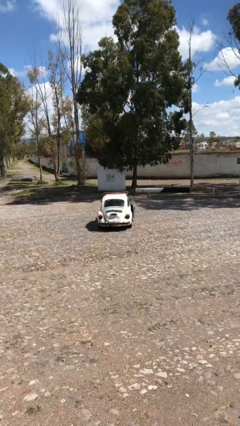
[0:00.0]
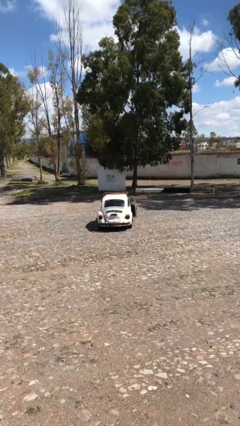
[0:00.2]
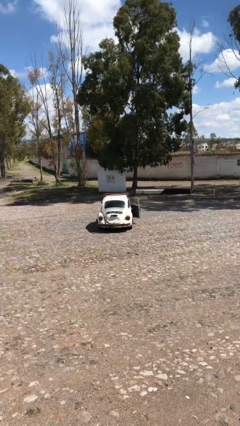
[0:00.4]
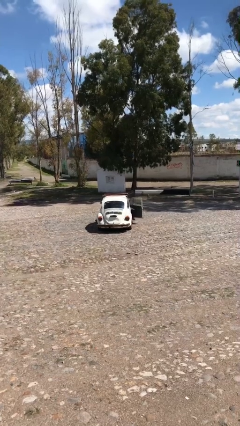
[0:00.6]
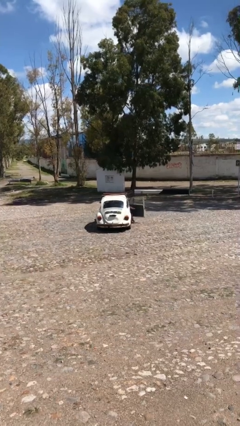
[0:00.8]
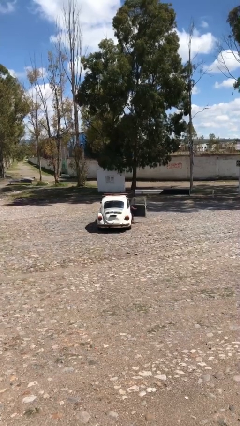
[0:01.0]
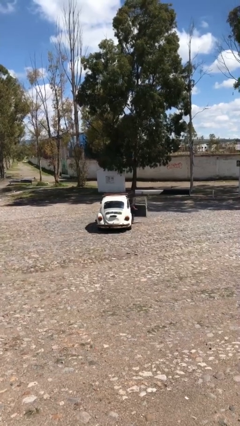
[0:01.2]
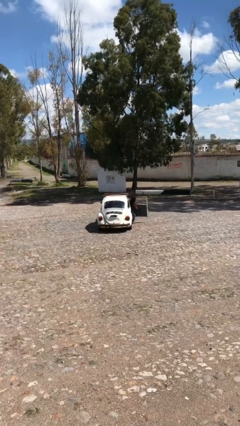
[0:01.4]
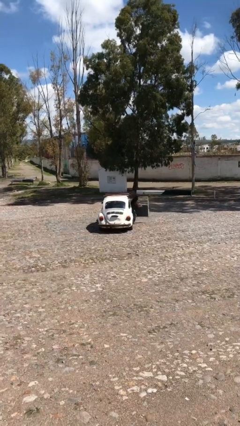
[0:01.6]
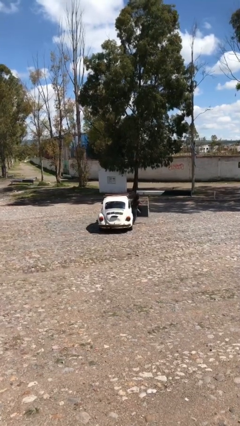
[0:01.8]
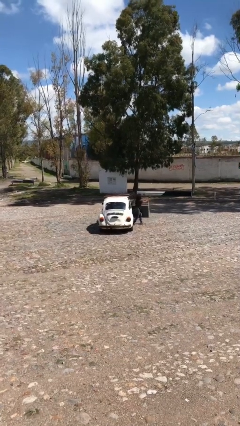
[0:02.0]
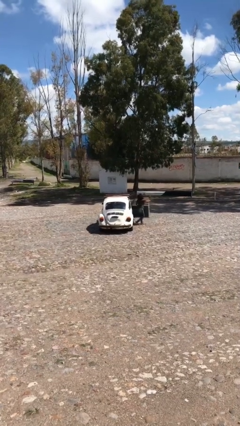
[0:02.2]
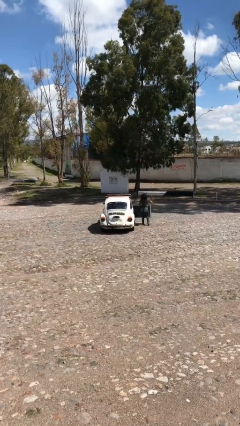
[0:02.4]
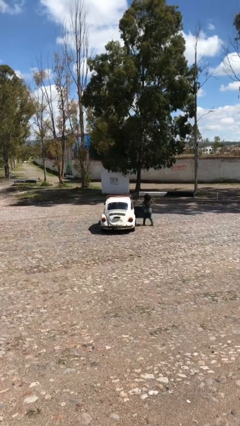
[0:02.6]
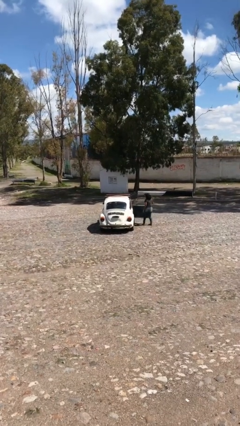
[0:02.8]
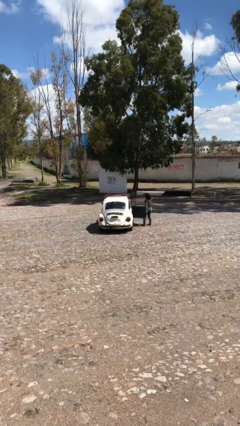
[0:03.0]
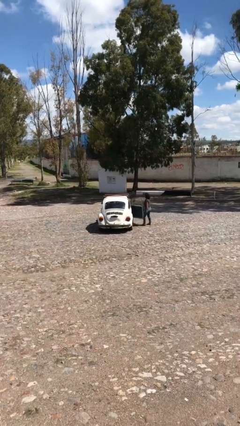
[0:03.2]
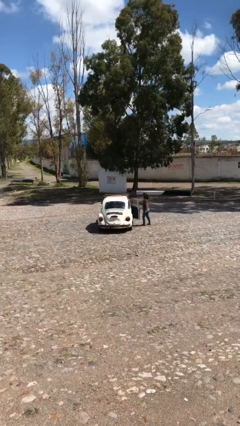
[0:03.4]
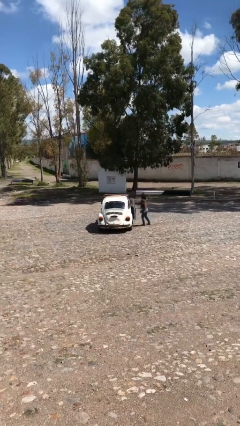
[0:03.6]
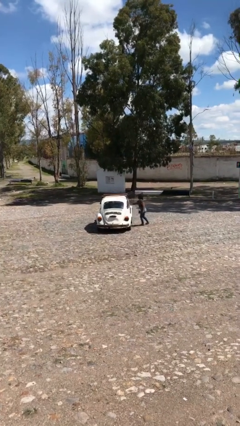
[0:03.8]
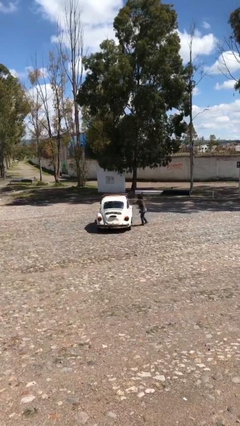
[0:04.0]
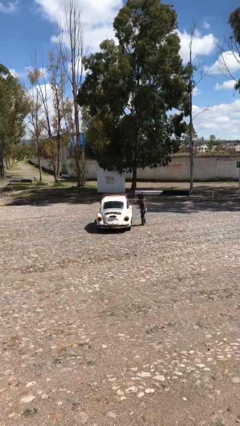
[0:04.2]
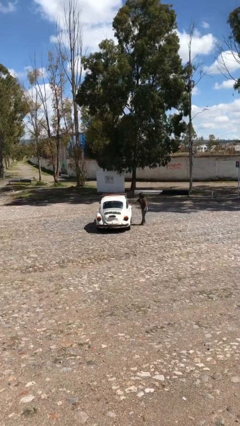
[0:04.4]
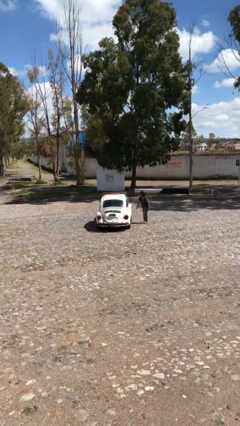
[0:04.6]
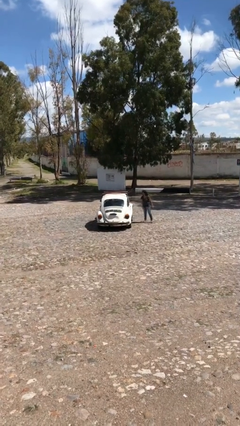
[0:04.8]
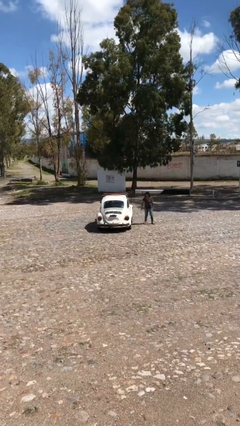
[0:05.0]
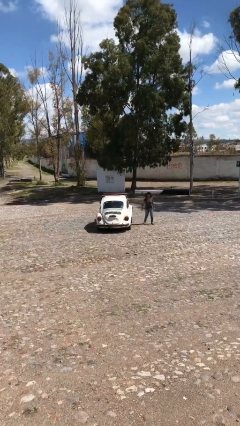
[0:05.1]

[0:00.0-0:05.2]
car drops off person

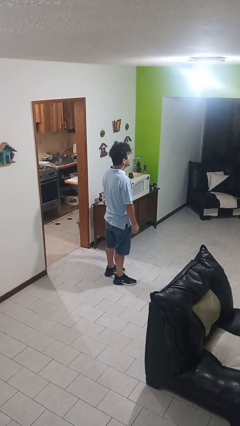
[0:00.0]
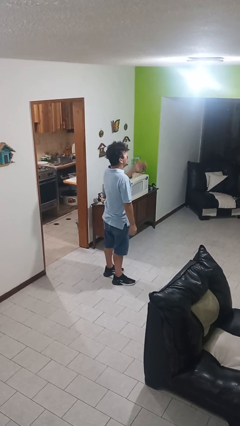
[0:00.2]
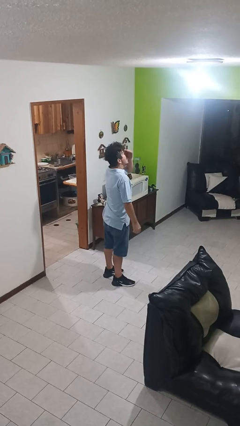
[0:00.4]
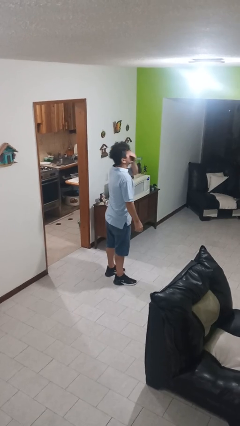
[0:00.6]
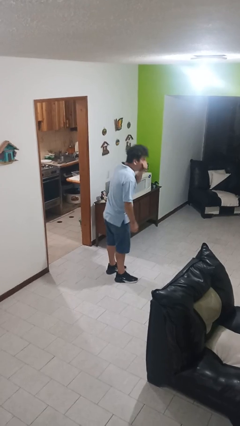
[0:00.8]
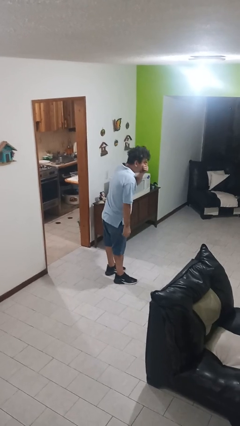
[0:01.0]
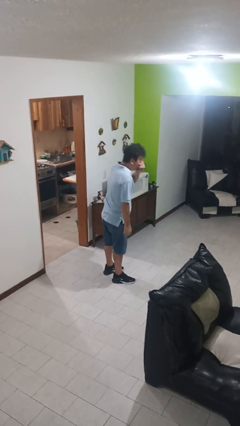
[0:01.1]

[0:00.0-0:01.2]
person sneezes into hand

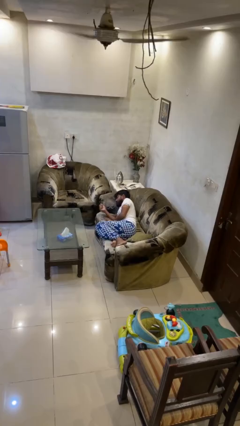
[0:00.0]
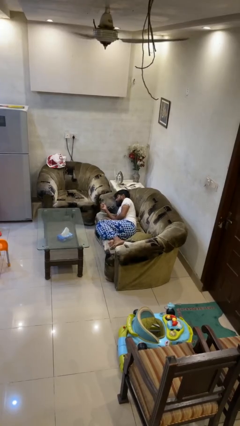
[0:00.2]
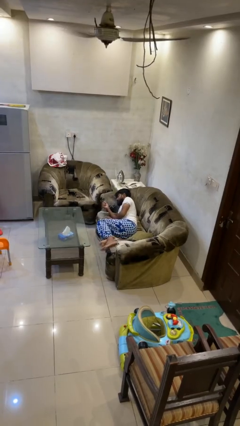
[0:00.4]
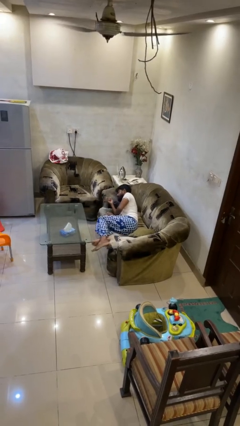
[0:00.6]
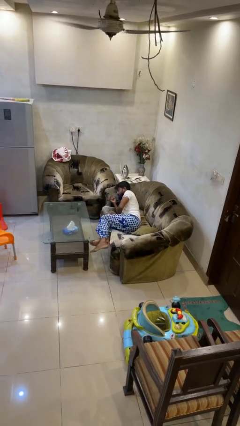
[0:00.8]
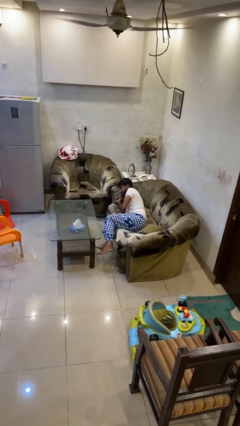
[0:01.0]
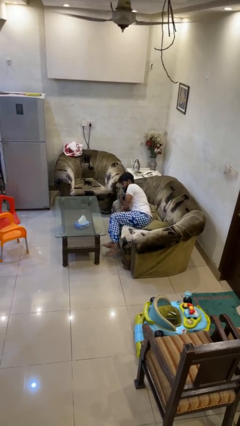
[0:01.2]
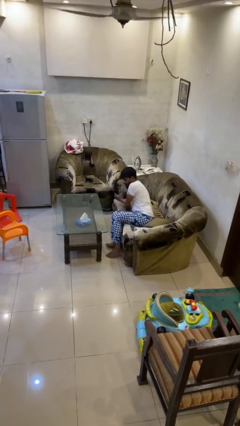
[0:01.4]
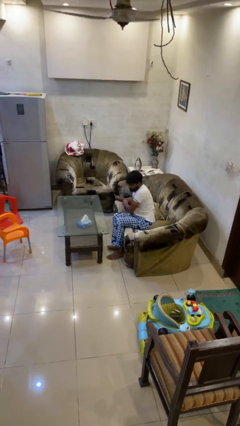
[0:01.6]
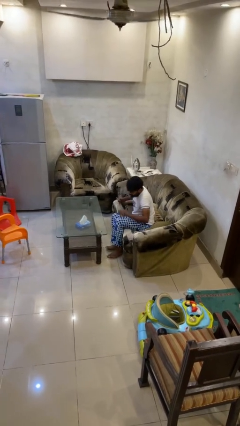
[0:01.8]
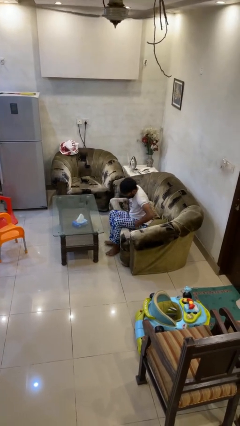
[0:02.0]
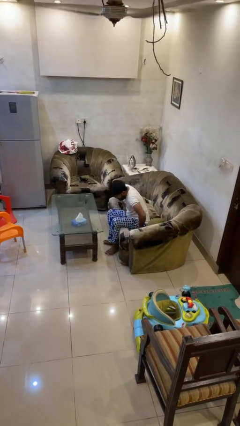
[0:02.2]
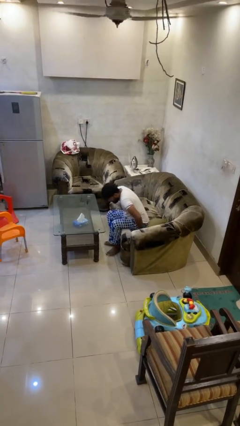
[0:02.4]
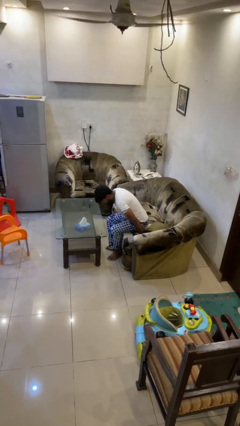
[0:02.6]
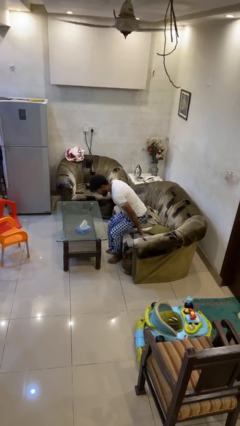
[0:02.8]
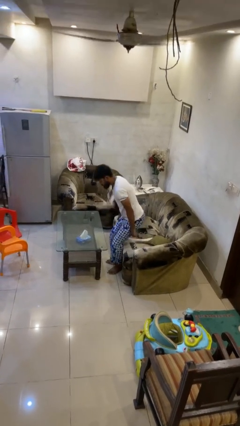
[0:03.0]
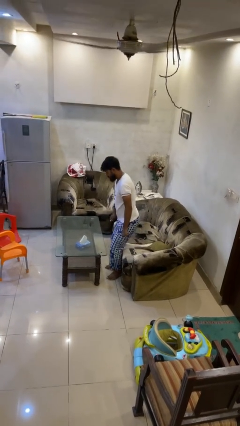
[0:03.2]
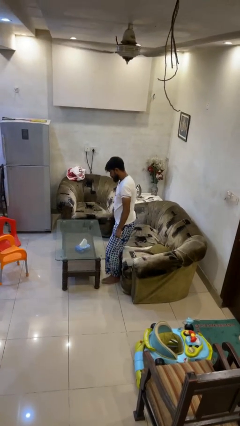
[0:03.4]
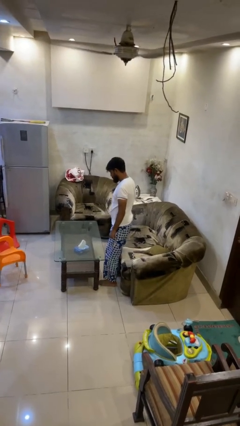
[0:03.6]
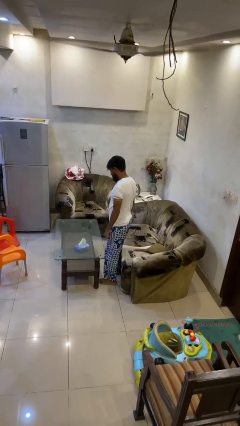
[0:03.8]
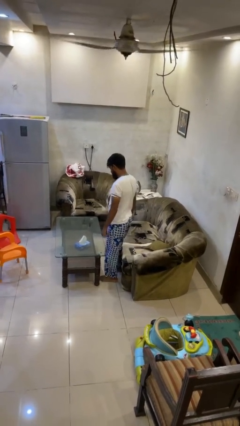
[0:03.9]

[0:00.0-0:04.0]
person stands up

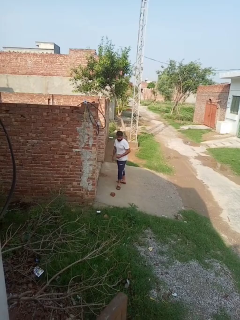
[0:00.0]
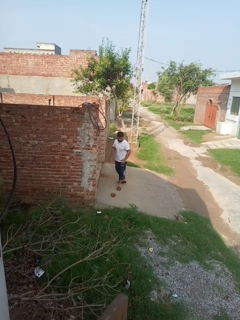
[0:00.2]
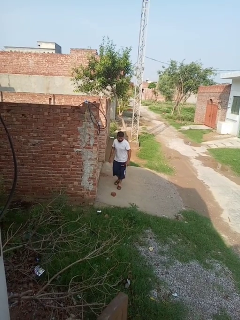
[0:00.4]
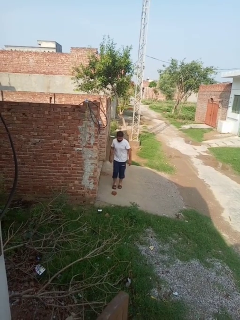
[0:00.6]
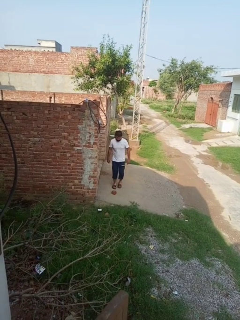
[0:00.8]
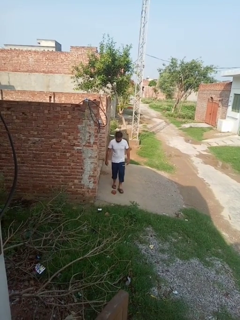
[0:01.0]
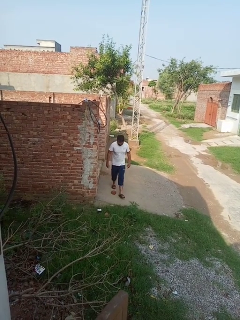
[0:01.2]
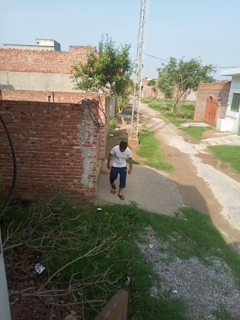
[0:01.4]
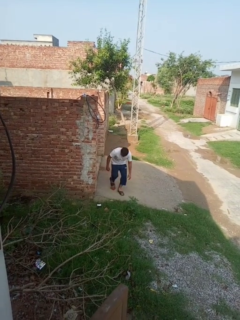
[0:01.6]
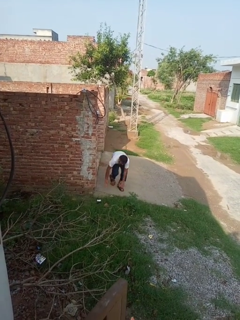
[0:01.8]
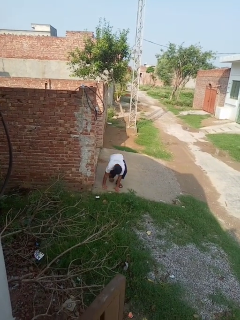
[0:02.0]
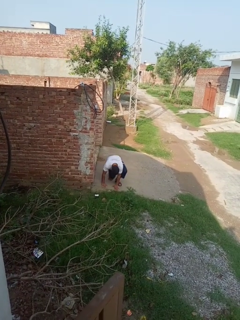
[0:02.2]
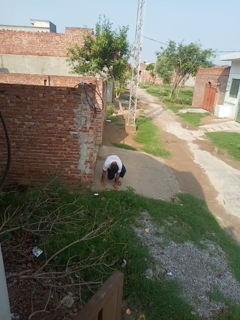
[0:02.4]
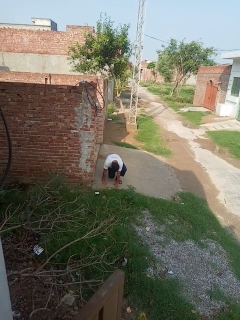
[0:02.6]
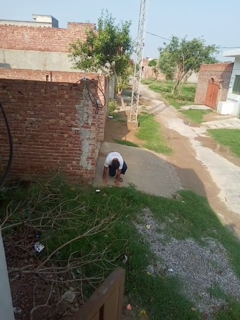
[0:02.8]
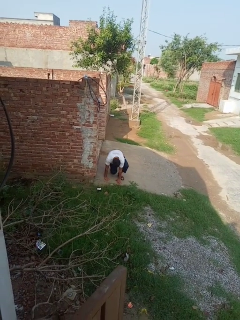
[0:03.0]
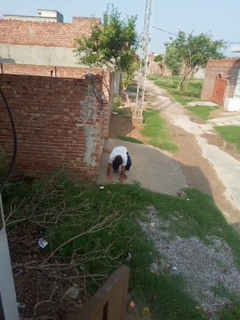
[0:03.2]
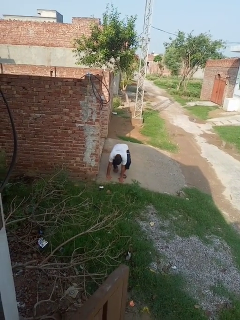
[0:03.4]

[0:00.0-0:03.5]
person trips on object on floor

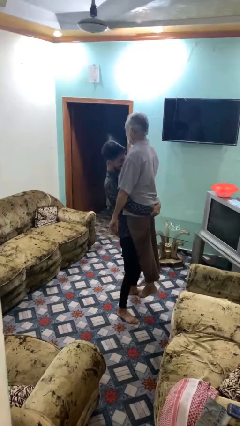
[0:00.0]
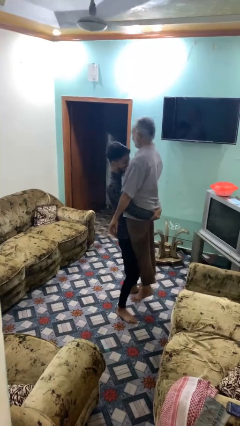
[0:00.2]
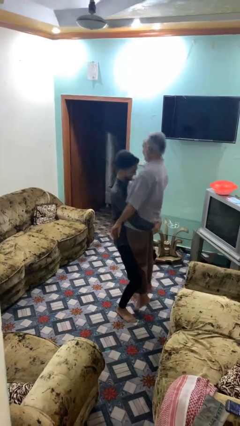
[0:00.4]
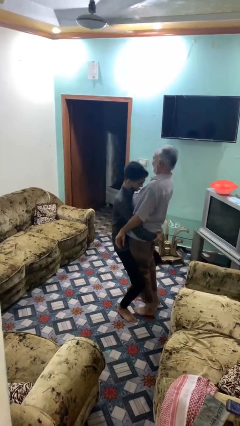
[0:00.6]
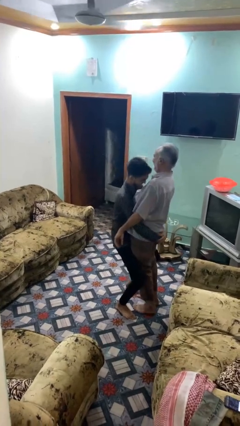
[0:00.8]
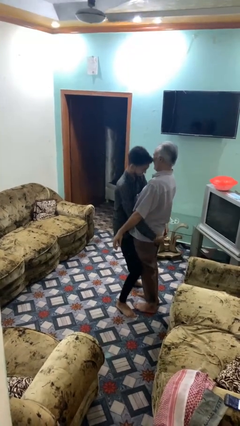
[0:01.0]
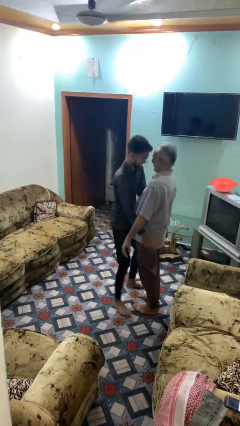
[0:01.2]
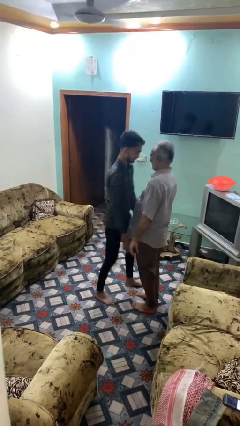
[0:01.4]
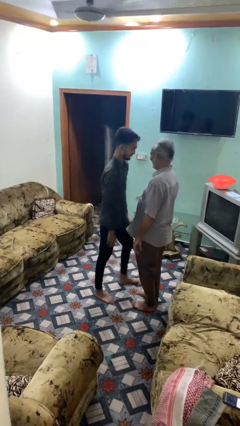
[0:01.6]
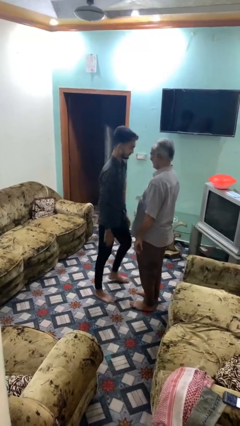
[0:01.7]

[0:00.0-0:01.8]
person puts down person

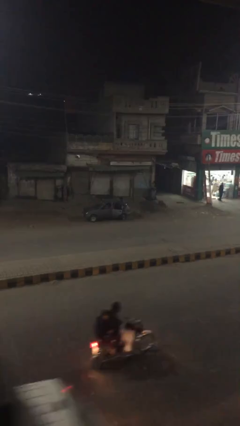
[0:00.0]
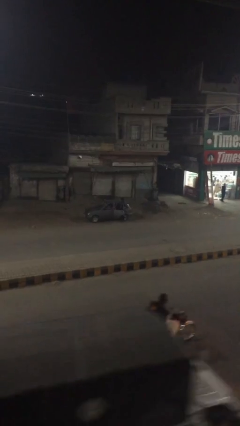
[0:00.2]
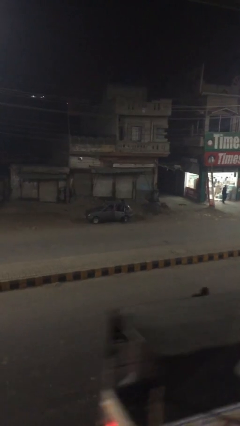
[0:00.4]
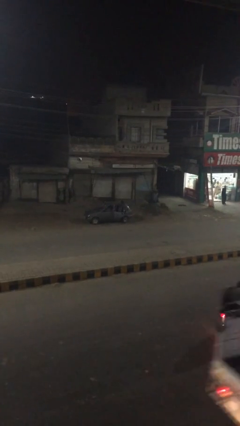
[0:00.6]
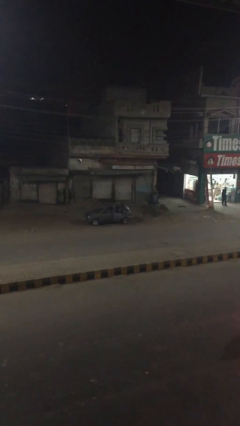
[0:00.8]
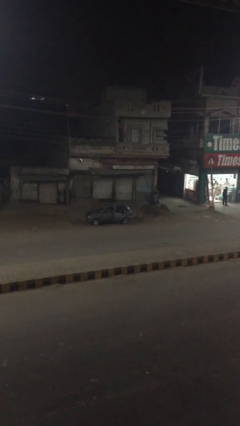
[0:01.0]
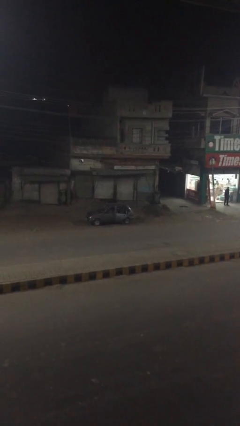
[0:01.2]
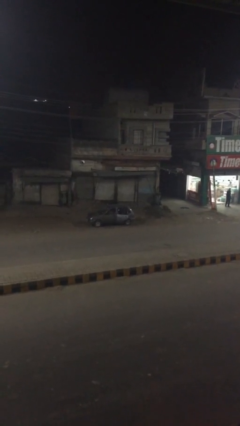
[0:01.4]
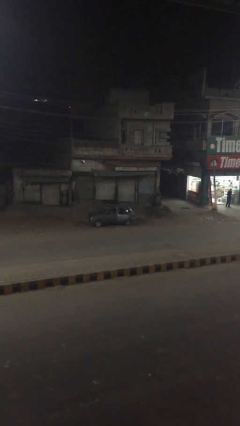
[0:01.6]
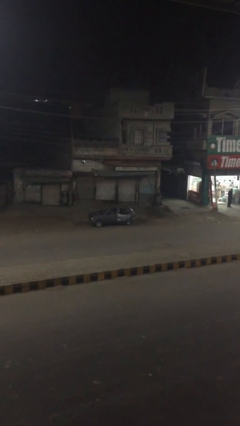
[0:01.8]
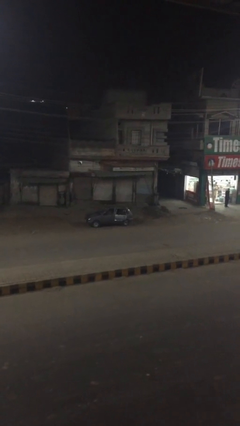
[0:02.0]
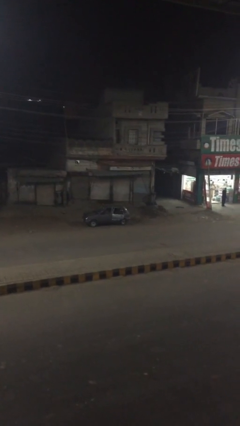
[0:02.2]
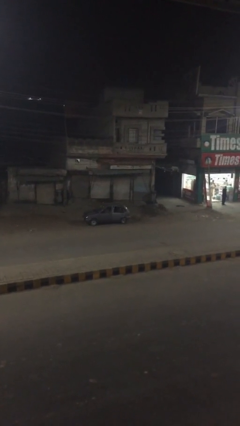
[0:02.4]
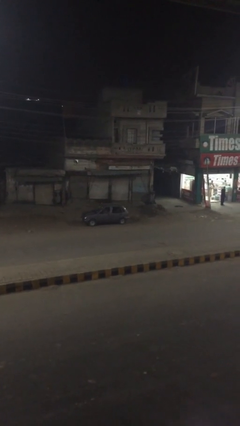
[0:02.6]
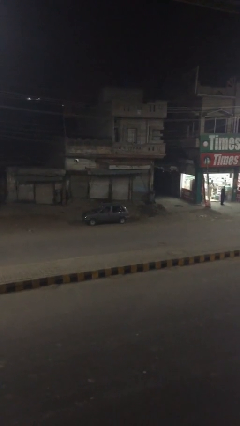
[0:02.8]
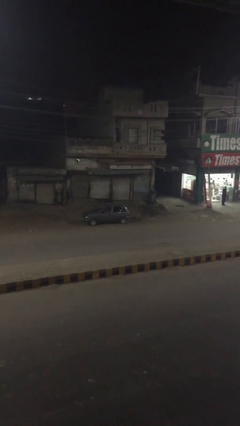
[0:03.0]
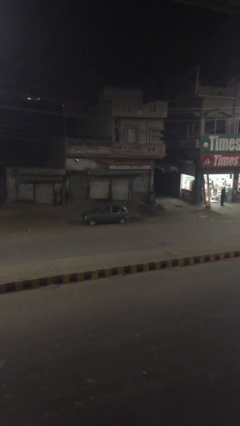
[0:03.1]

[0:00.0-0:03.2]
person enters car
